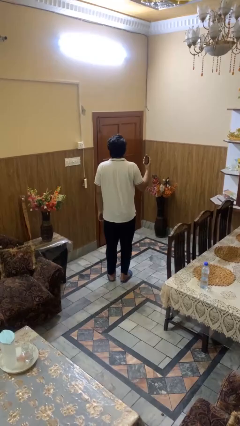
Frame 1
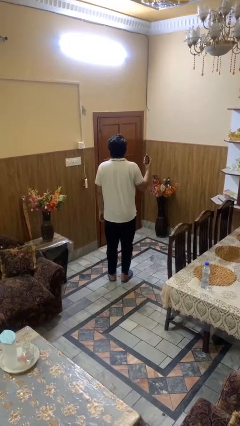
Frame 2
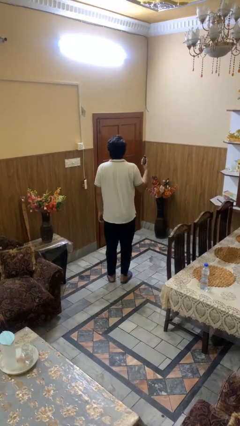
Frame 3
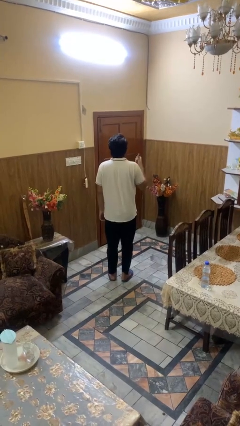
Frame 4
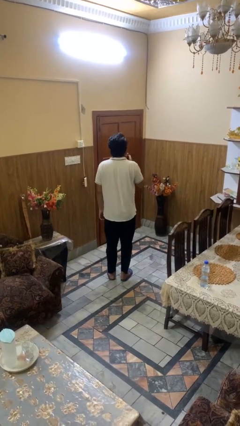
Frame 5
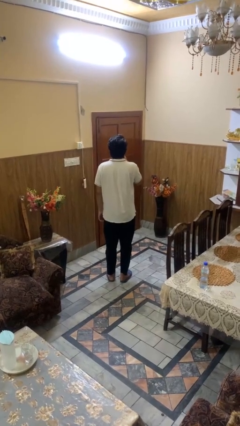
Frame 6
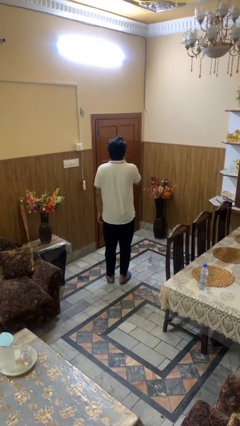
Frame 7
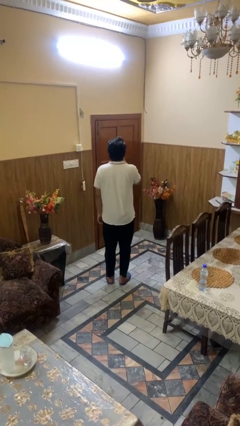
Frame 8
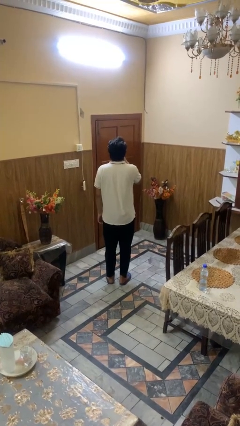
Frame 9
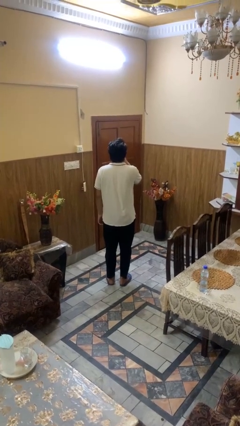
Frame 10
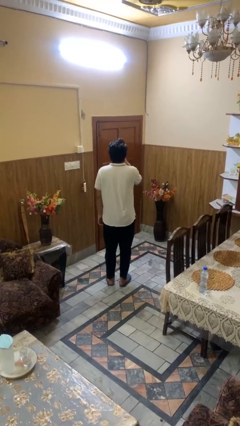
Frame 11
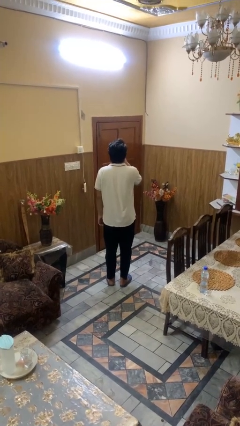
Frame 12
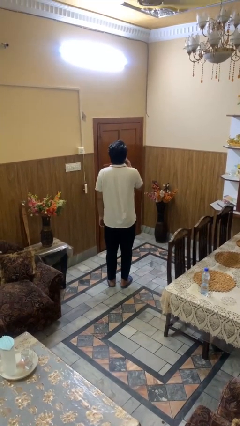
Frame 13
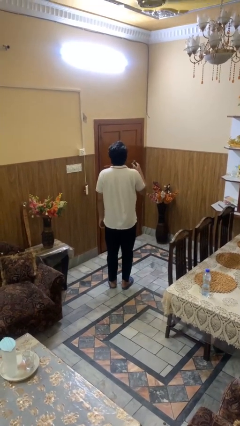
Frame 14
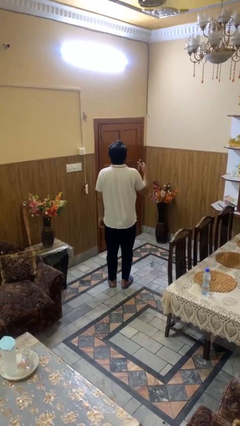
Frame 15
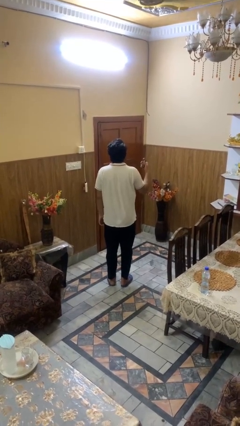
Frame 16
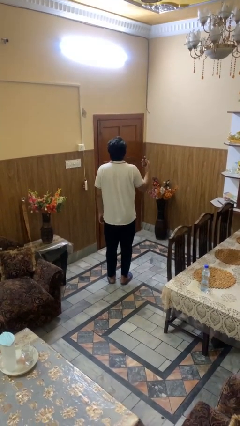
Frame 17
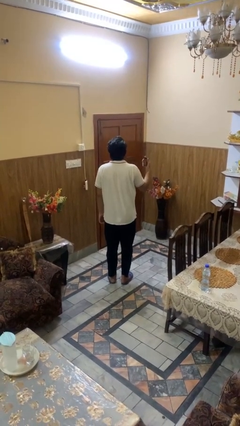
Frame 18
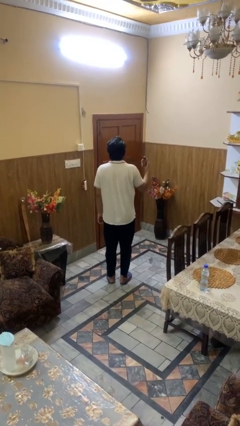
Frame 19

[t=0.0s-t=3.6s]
person vapes

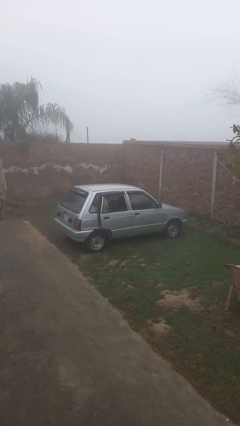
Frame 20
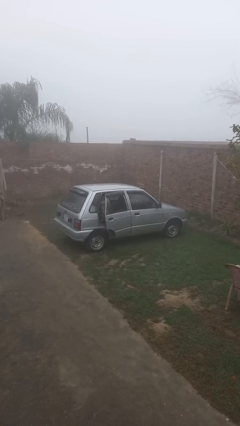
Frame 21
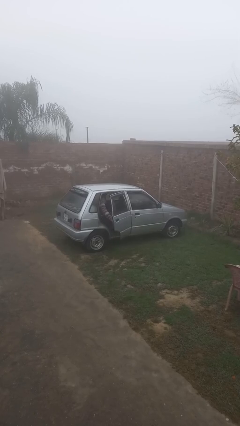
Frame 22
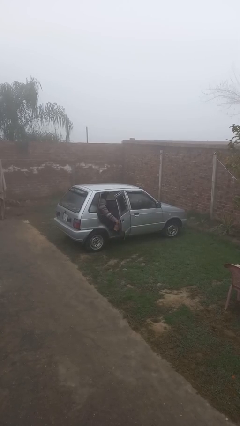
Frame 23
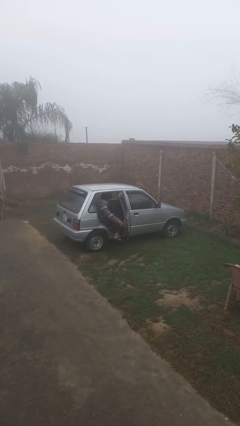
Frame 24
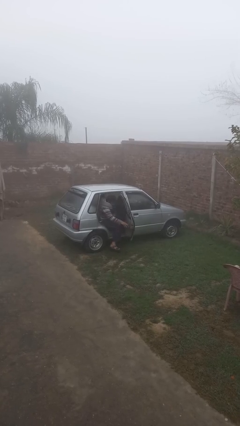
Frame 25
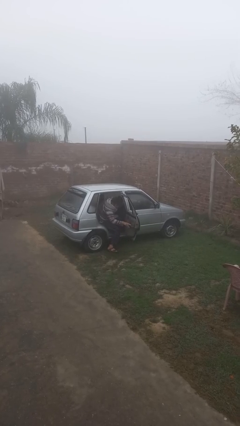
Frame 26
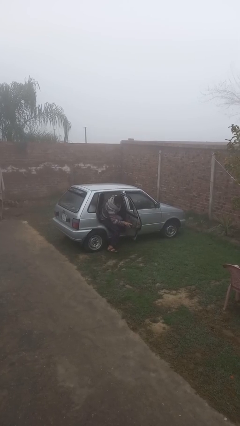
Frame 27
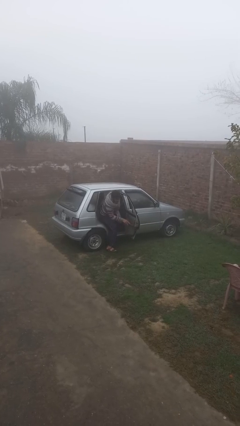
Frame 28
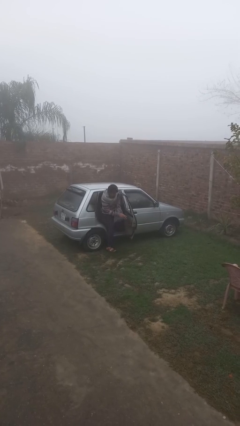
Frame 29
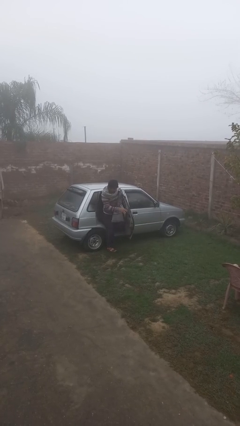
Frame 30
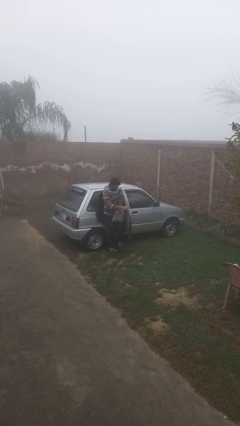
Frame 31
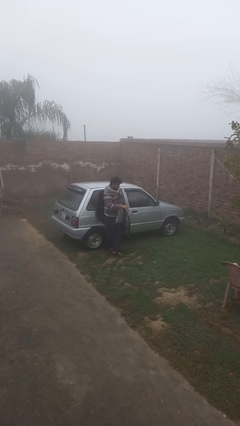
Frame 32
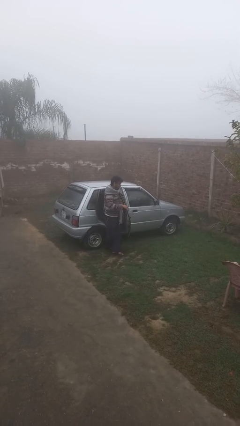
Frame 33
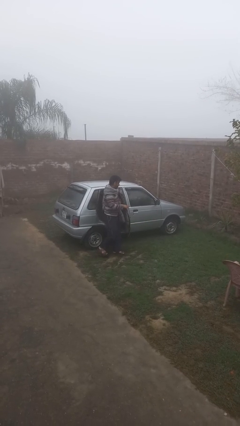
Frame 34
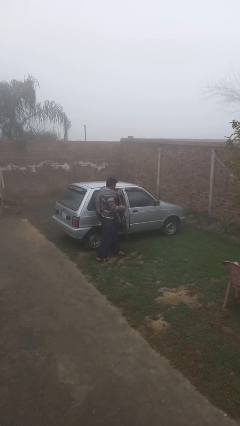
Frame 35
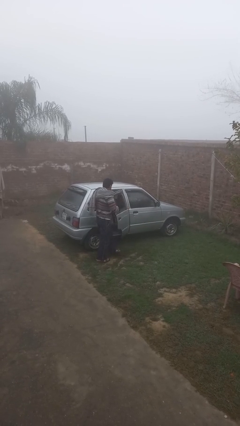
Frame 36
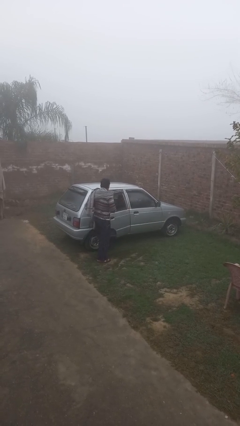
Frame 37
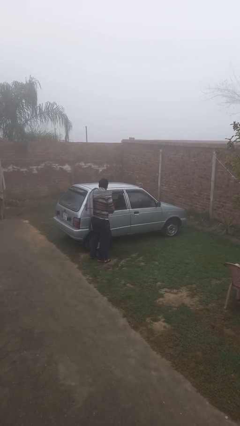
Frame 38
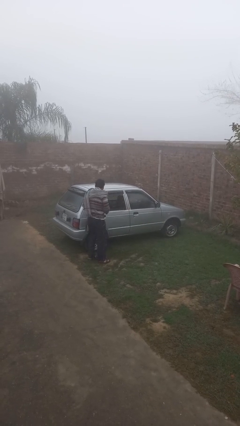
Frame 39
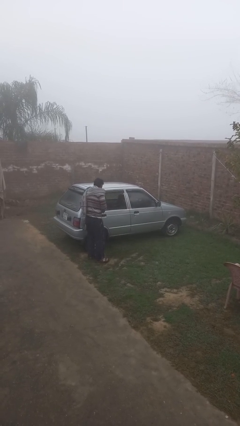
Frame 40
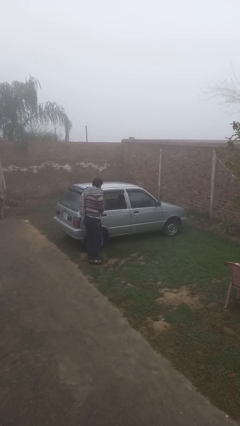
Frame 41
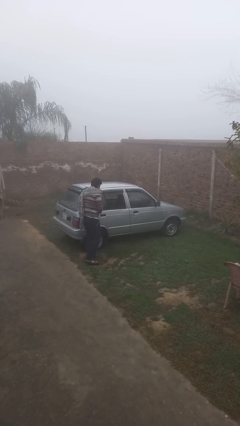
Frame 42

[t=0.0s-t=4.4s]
car drops off person

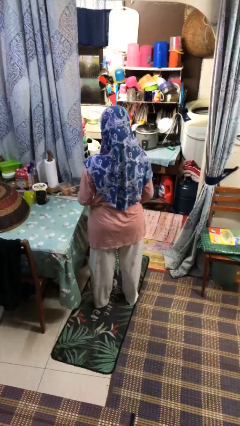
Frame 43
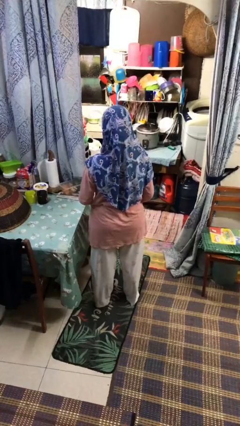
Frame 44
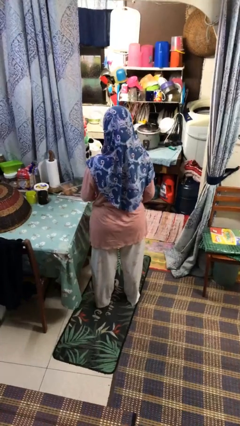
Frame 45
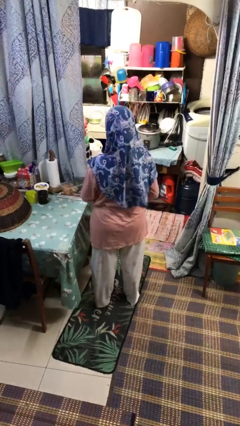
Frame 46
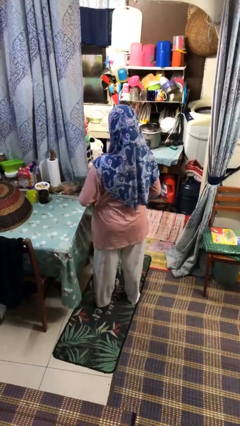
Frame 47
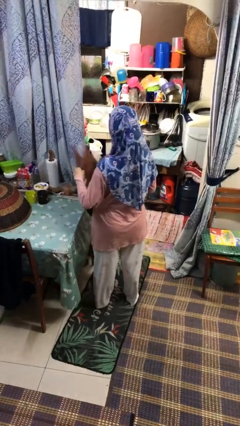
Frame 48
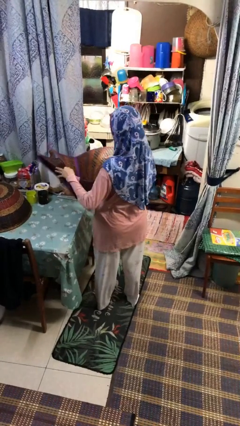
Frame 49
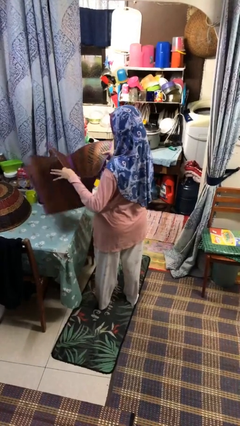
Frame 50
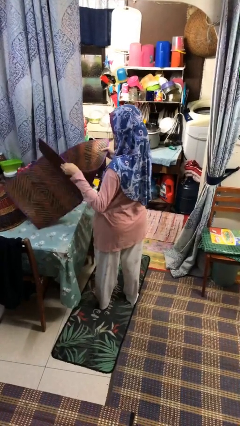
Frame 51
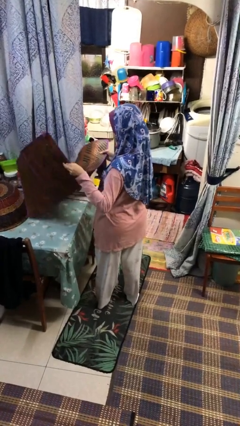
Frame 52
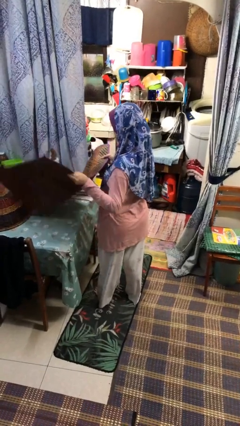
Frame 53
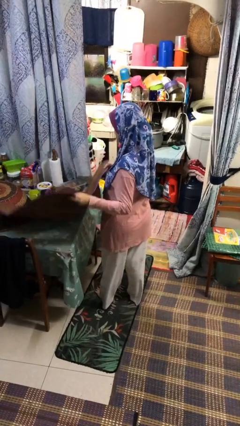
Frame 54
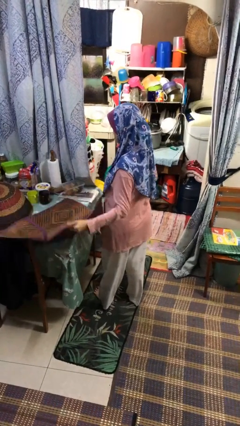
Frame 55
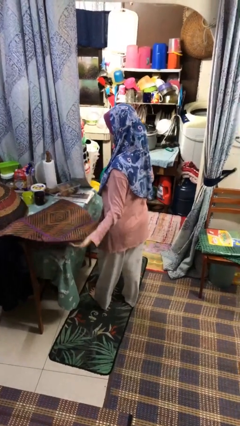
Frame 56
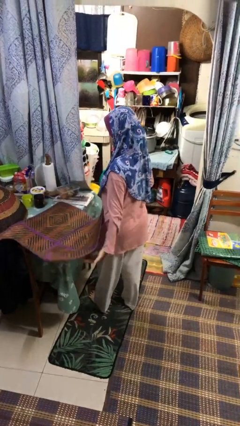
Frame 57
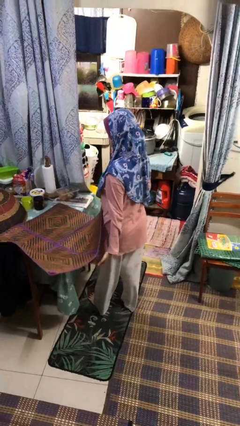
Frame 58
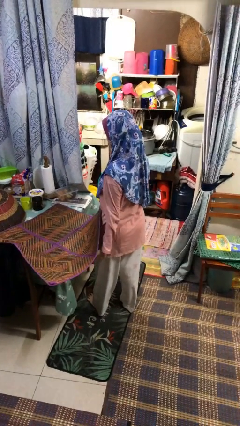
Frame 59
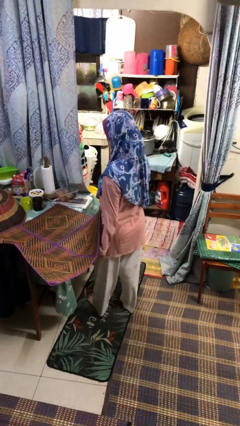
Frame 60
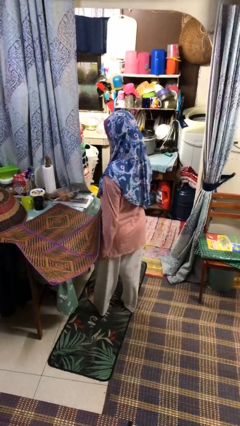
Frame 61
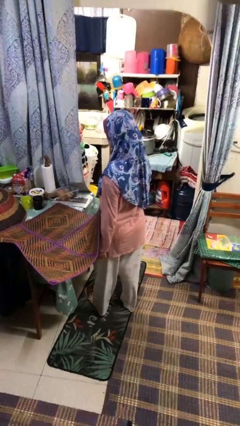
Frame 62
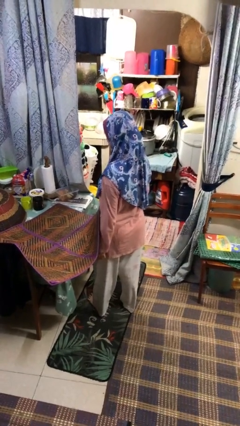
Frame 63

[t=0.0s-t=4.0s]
person spreads tablecloth

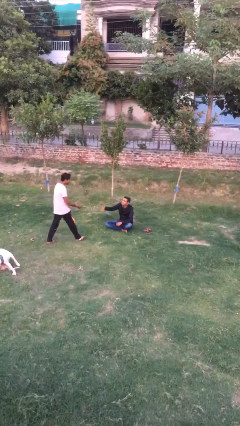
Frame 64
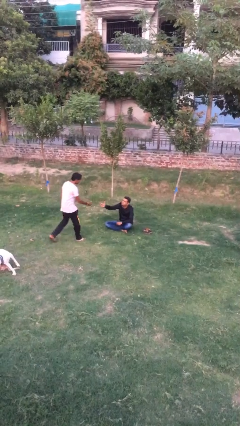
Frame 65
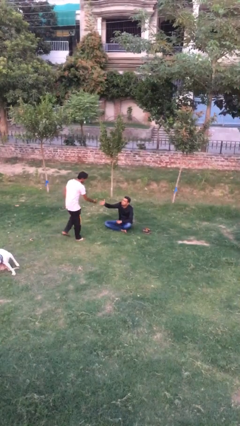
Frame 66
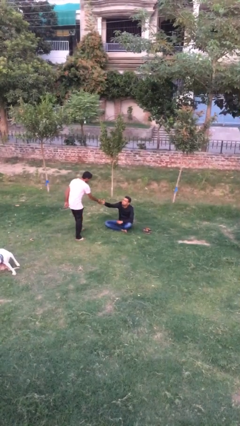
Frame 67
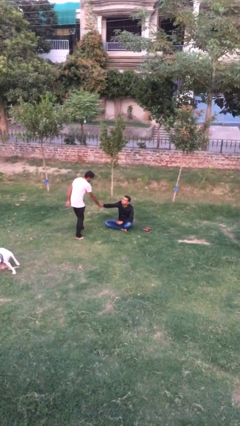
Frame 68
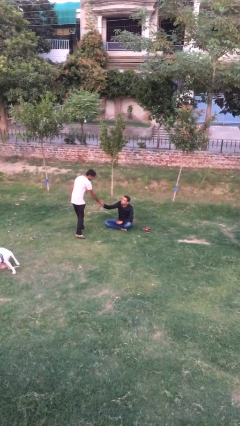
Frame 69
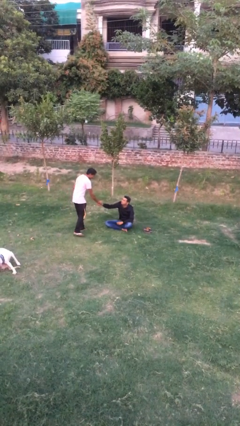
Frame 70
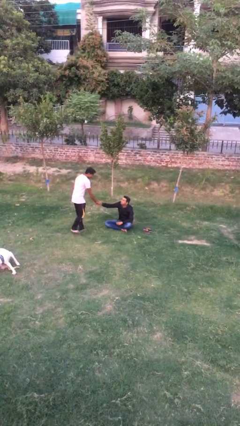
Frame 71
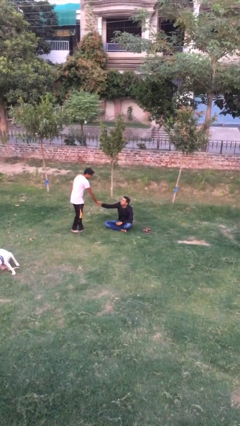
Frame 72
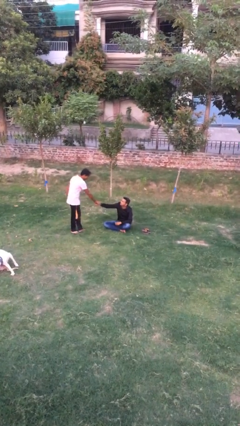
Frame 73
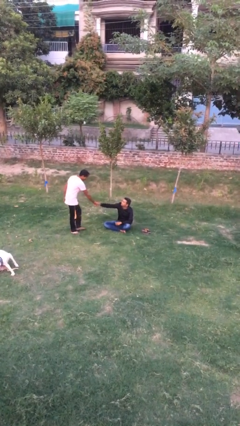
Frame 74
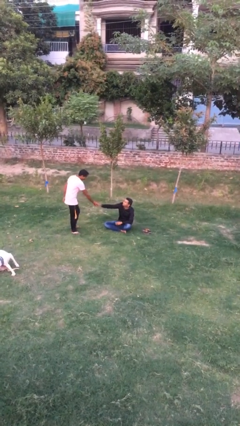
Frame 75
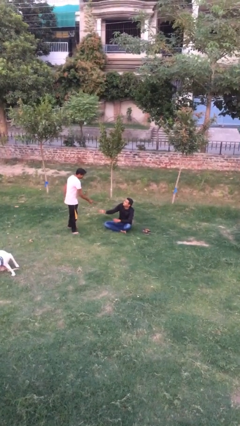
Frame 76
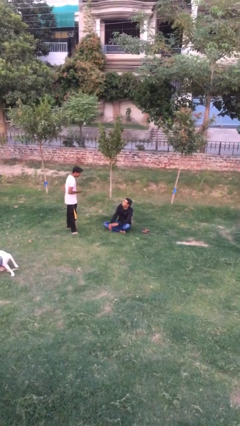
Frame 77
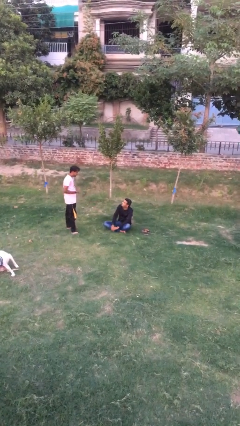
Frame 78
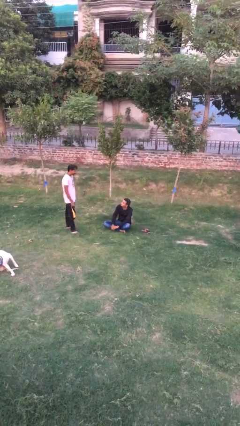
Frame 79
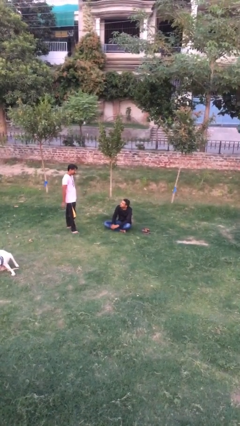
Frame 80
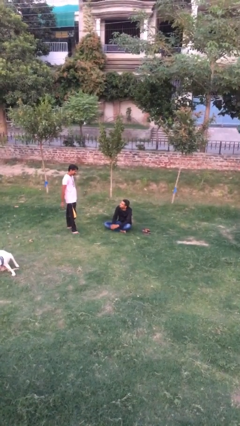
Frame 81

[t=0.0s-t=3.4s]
person shakes hand

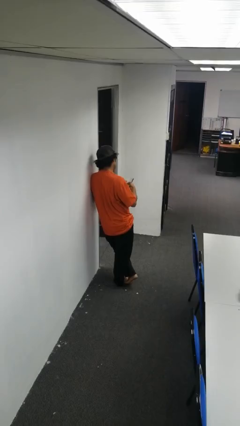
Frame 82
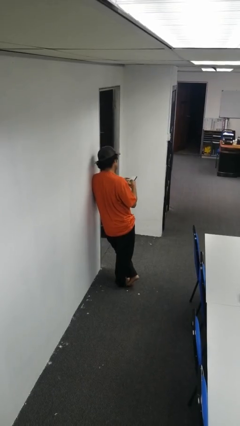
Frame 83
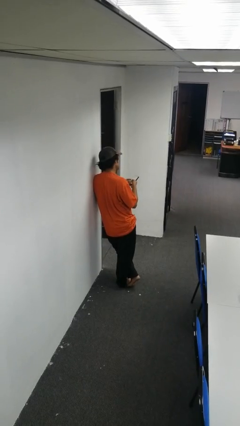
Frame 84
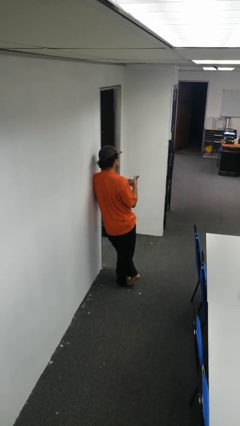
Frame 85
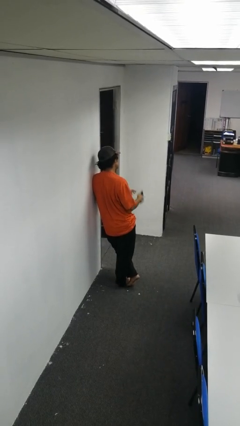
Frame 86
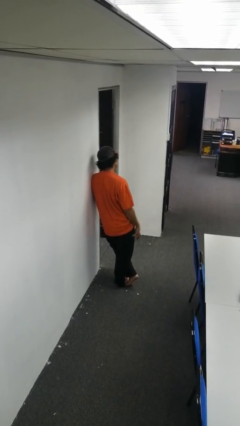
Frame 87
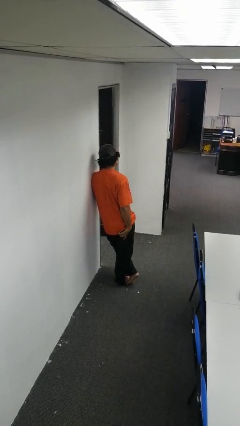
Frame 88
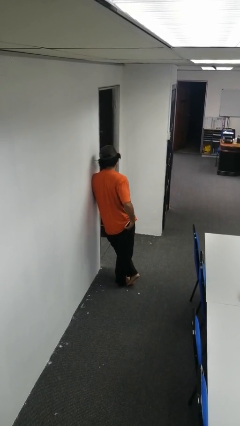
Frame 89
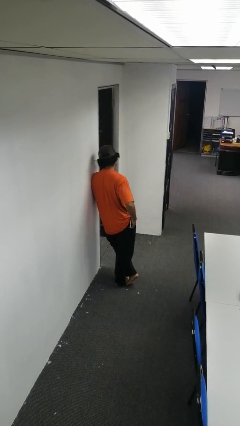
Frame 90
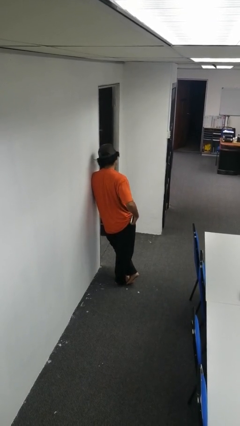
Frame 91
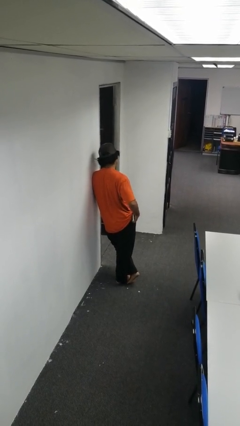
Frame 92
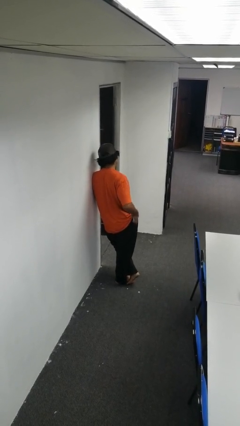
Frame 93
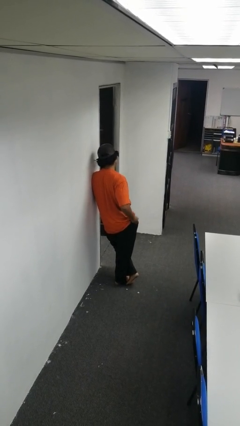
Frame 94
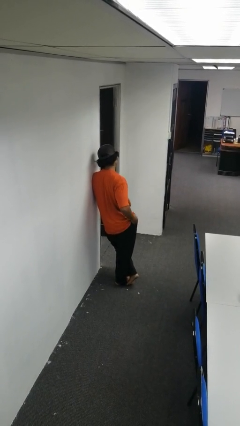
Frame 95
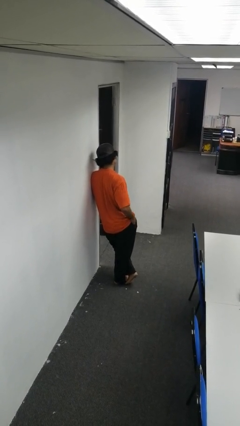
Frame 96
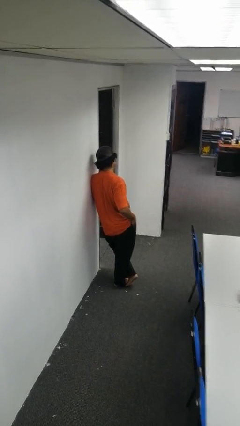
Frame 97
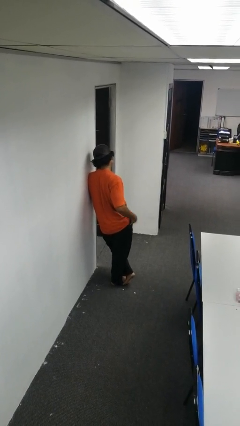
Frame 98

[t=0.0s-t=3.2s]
person puts phone into pocket
